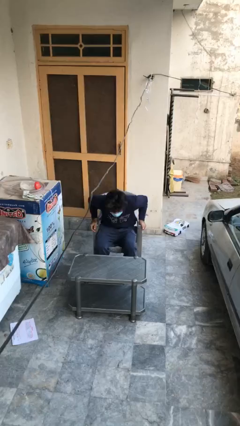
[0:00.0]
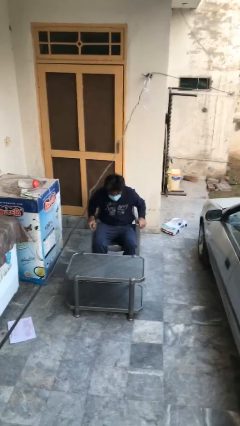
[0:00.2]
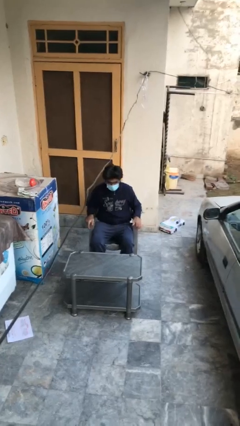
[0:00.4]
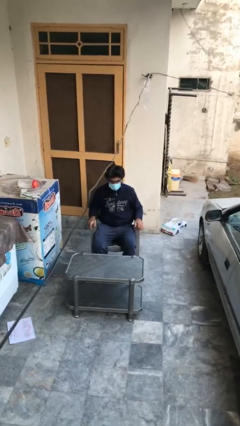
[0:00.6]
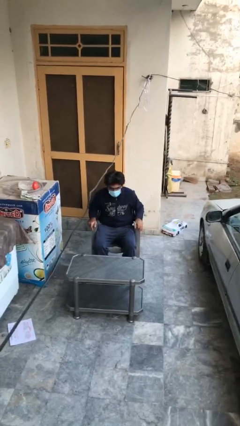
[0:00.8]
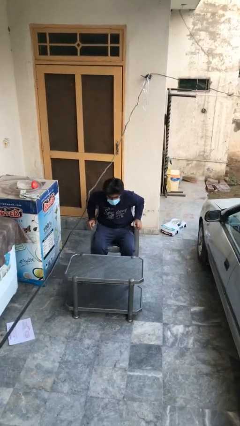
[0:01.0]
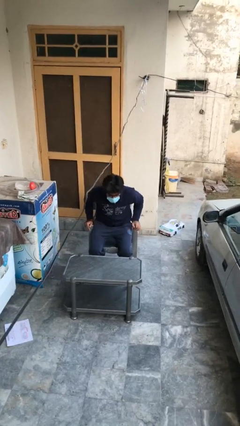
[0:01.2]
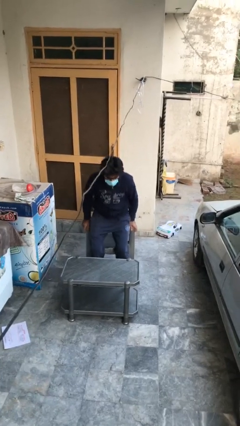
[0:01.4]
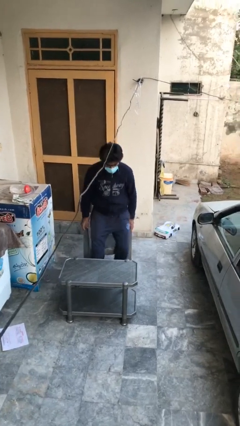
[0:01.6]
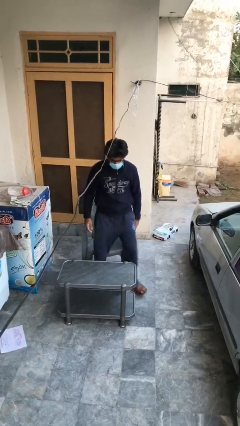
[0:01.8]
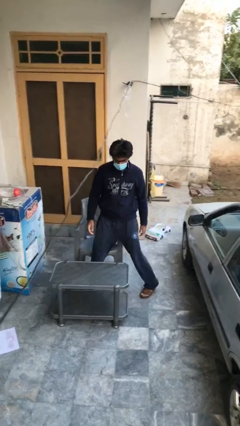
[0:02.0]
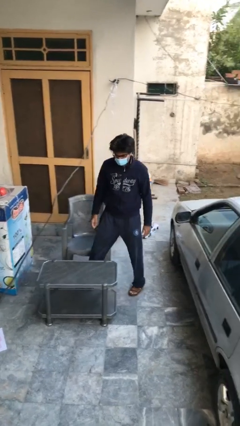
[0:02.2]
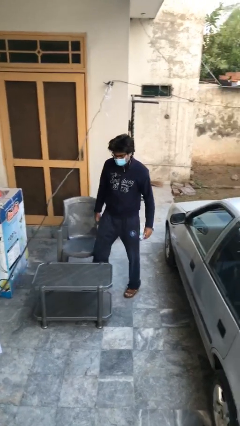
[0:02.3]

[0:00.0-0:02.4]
person stands up

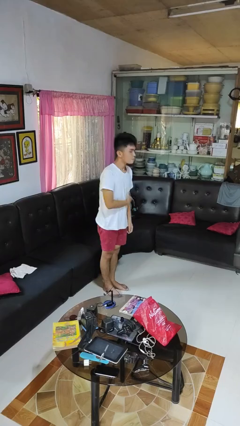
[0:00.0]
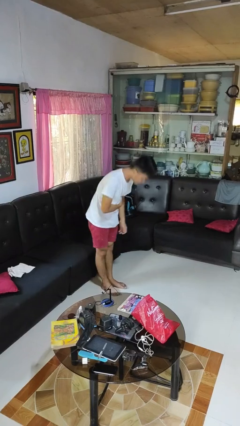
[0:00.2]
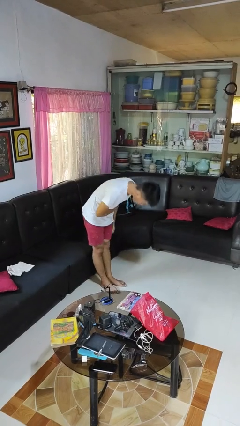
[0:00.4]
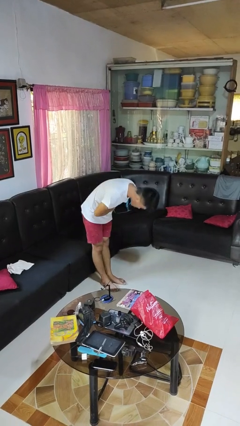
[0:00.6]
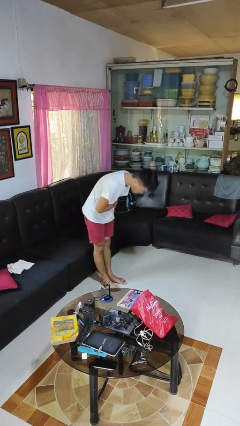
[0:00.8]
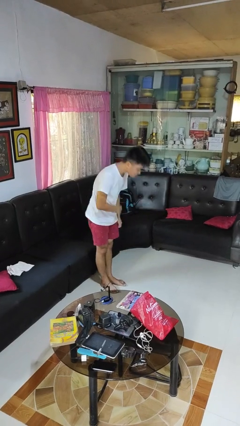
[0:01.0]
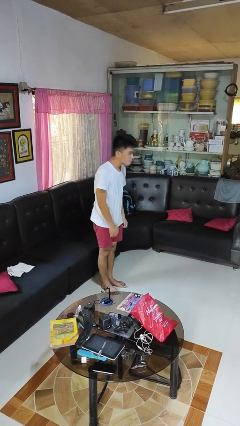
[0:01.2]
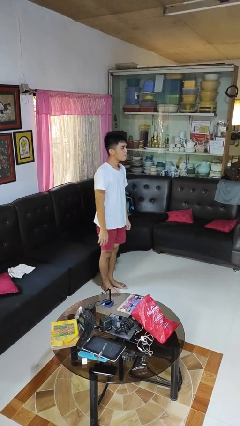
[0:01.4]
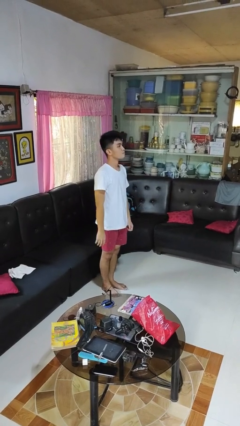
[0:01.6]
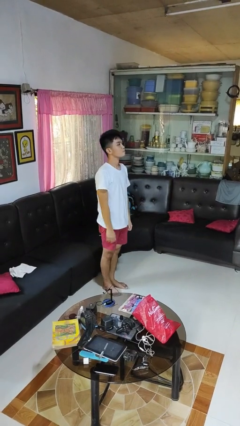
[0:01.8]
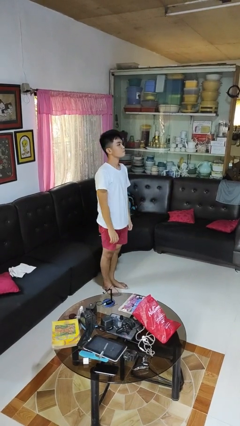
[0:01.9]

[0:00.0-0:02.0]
person bows

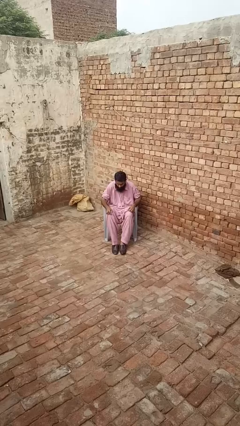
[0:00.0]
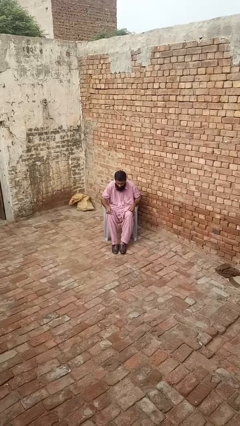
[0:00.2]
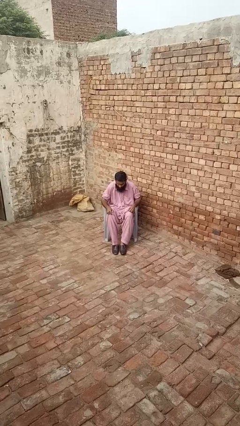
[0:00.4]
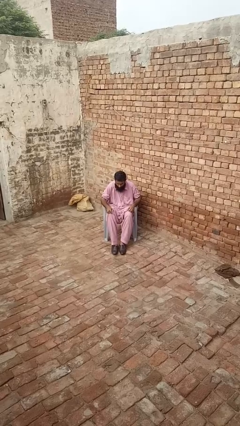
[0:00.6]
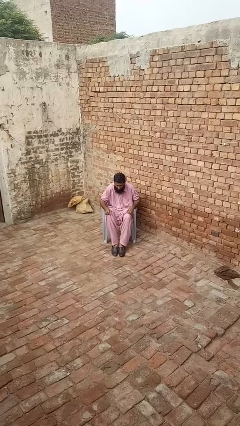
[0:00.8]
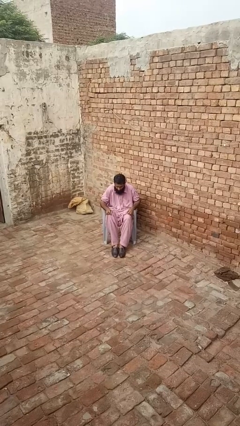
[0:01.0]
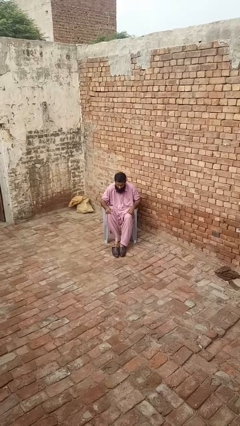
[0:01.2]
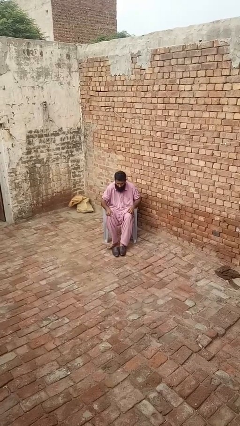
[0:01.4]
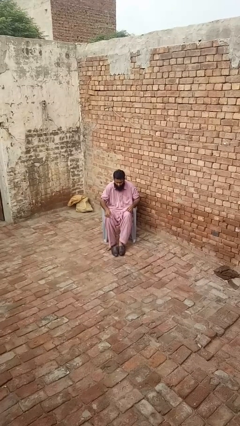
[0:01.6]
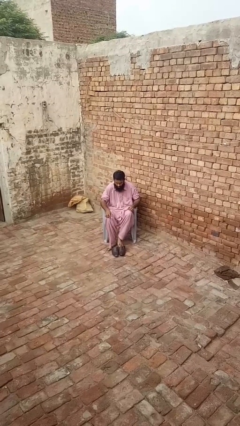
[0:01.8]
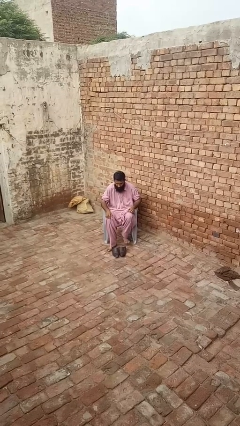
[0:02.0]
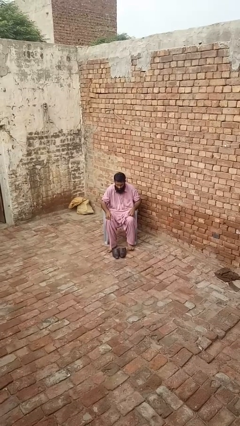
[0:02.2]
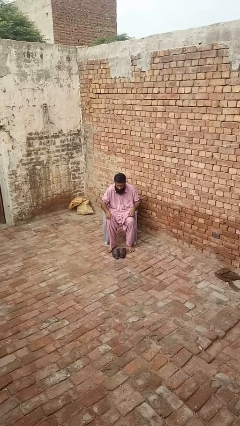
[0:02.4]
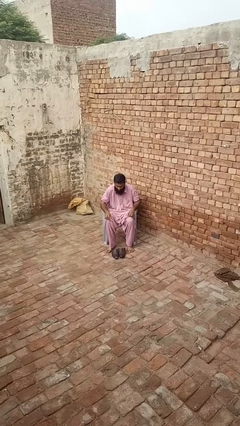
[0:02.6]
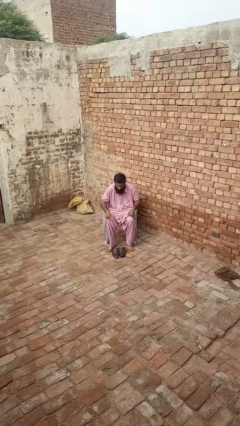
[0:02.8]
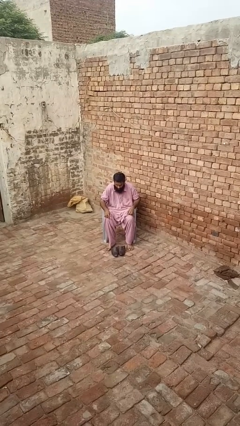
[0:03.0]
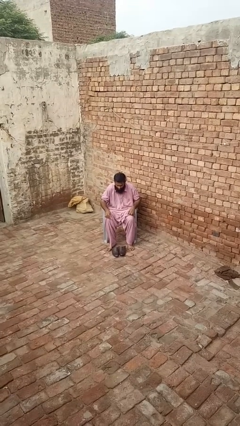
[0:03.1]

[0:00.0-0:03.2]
person takes off shoes

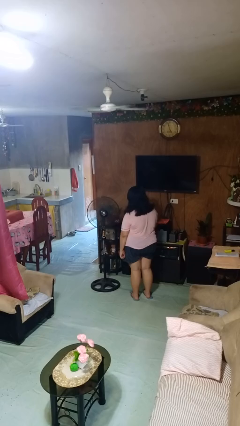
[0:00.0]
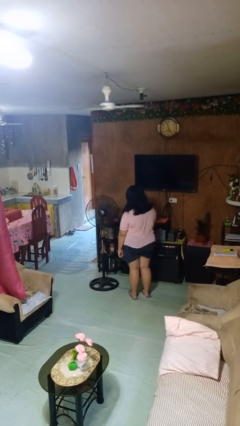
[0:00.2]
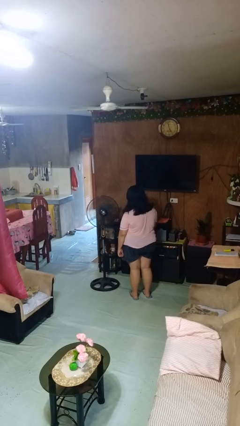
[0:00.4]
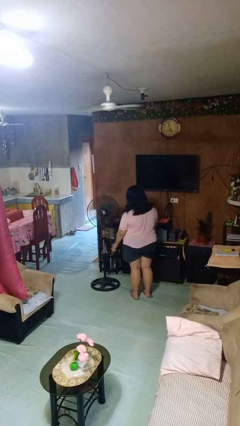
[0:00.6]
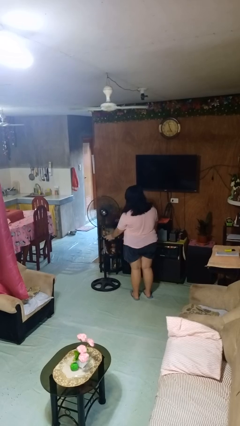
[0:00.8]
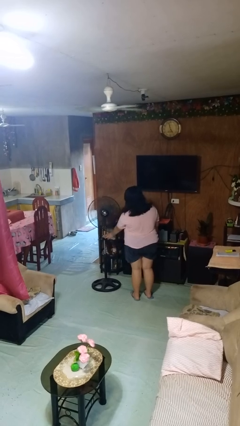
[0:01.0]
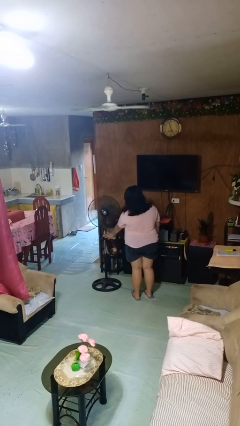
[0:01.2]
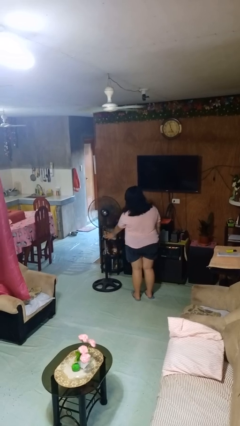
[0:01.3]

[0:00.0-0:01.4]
person turns off fan

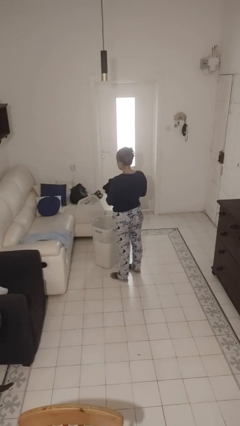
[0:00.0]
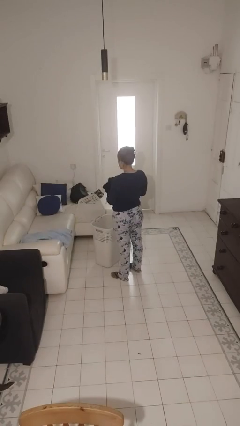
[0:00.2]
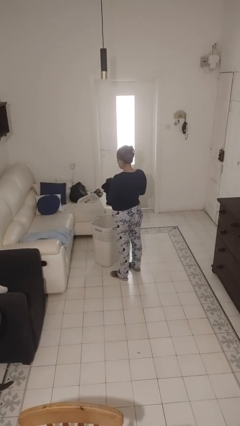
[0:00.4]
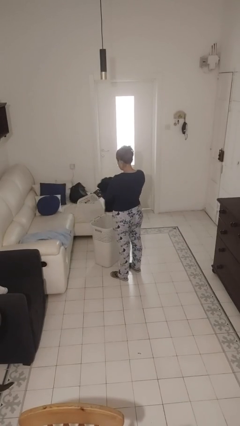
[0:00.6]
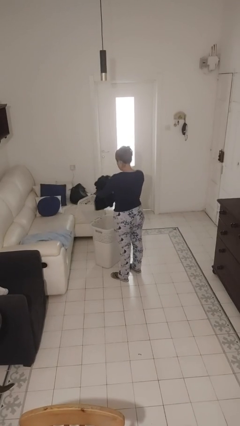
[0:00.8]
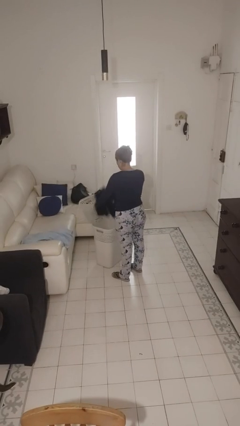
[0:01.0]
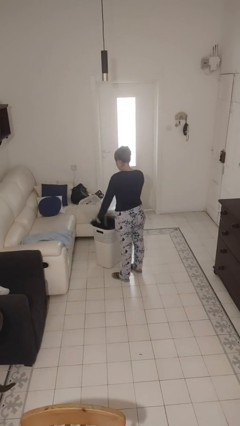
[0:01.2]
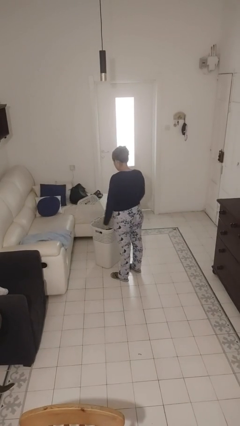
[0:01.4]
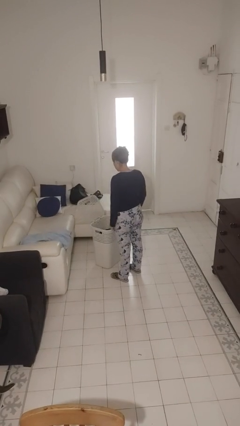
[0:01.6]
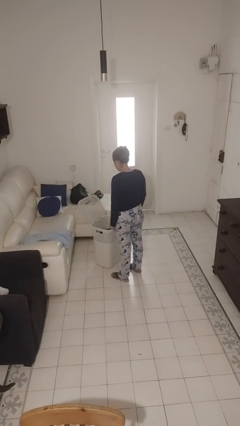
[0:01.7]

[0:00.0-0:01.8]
person puts object into basket

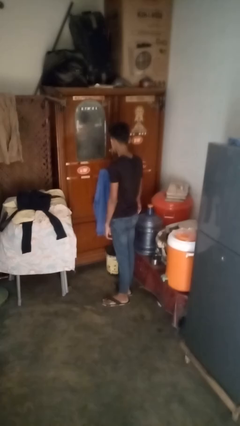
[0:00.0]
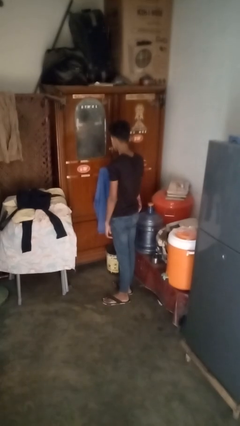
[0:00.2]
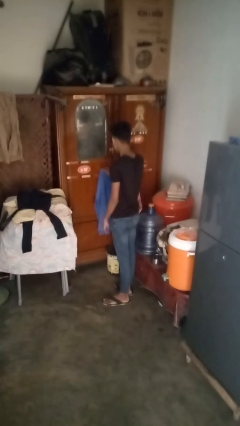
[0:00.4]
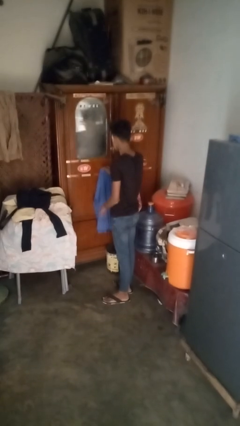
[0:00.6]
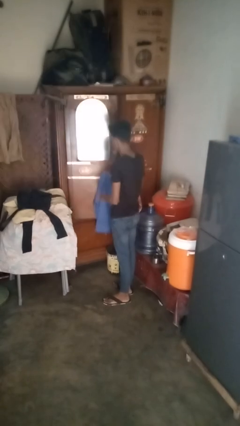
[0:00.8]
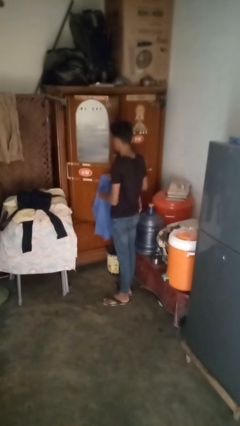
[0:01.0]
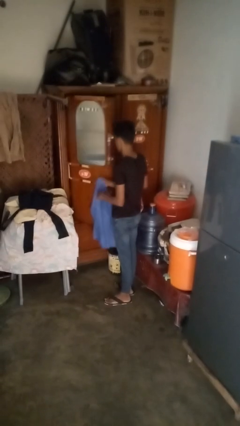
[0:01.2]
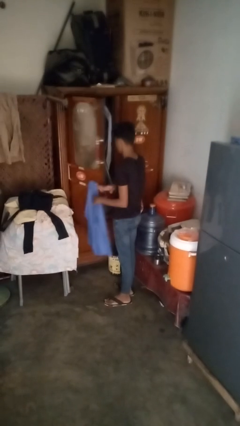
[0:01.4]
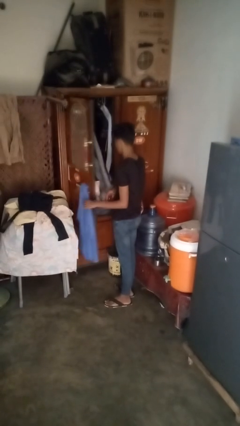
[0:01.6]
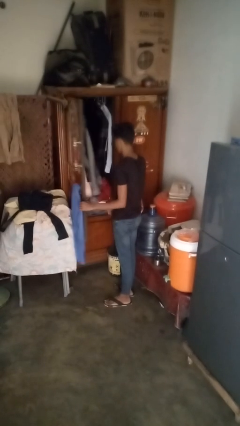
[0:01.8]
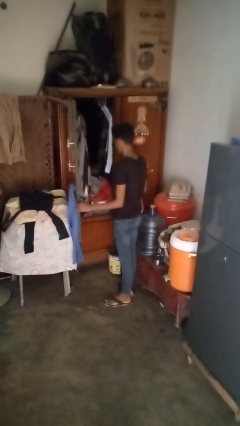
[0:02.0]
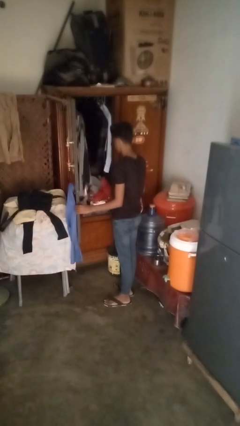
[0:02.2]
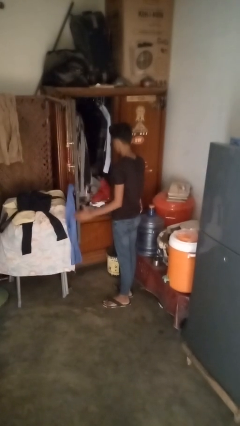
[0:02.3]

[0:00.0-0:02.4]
person opens dresser drawer

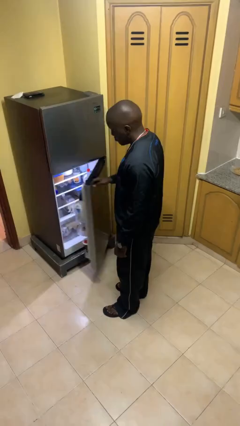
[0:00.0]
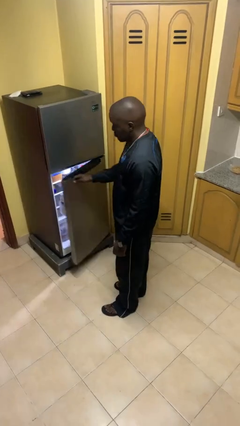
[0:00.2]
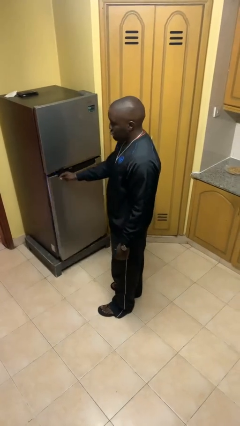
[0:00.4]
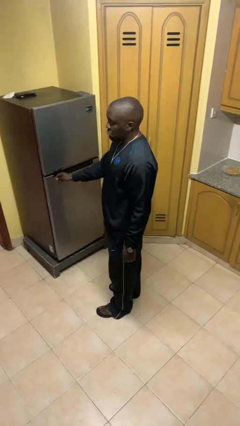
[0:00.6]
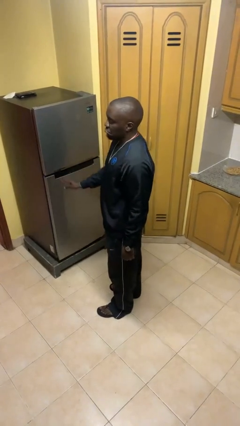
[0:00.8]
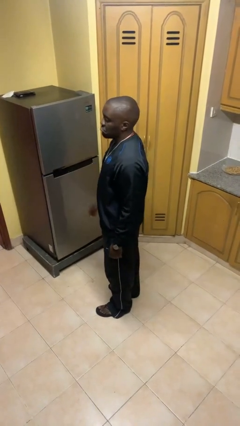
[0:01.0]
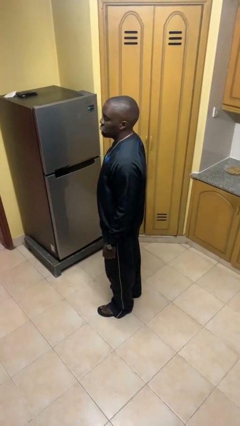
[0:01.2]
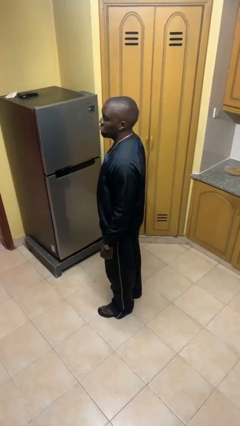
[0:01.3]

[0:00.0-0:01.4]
person closes refrigerator

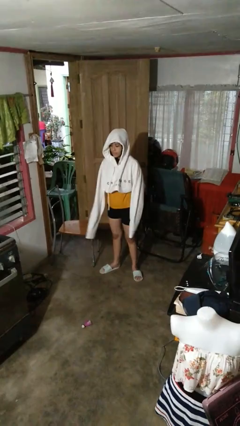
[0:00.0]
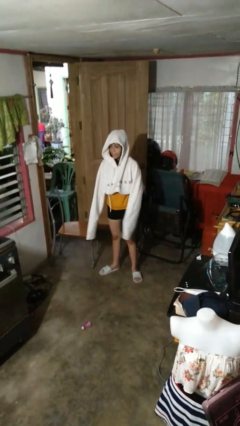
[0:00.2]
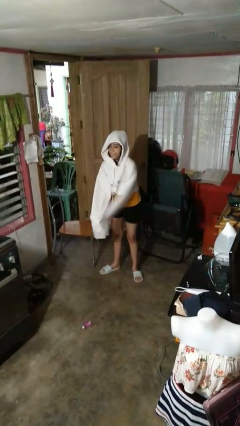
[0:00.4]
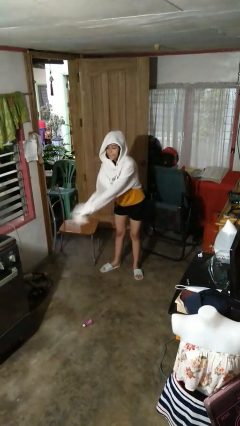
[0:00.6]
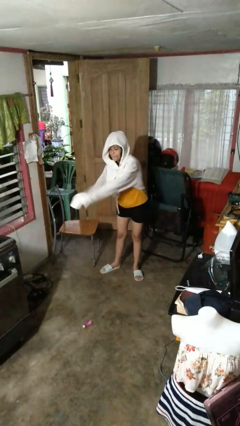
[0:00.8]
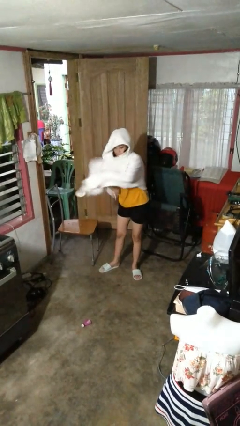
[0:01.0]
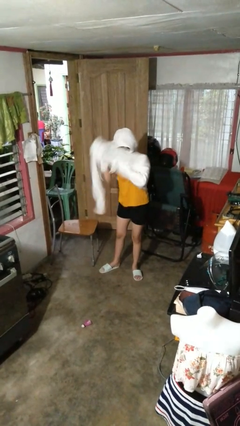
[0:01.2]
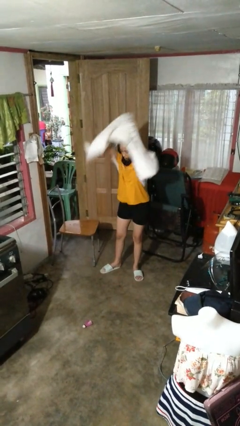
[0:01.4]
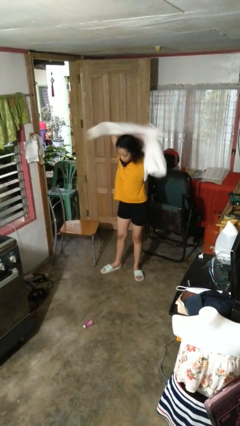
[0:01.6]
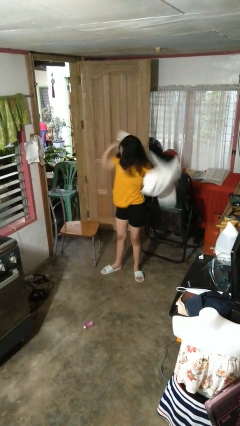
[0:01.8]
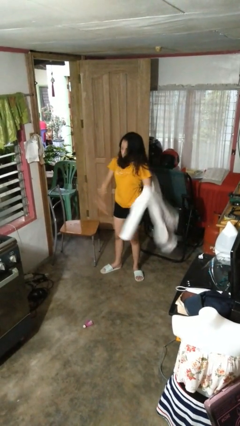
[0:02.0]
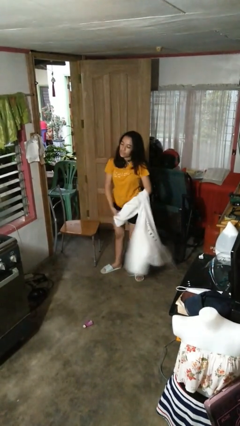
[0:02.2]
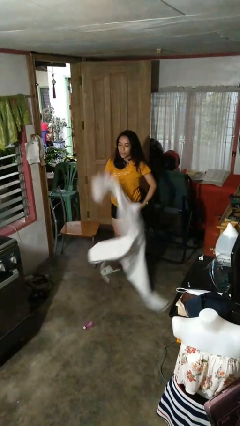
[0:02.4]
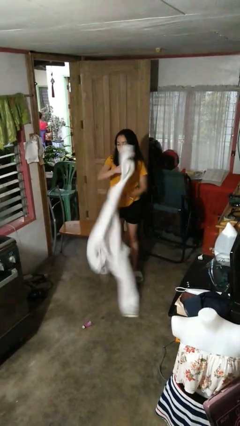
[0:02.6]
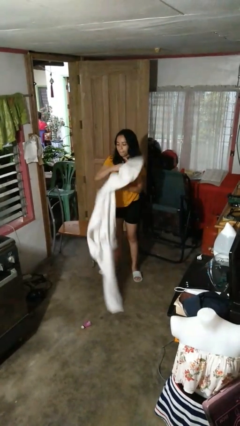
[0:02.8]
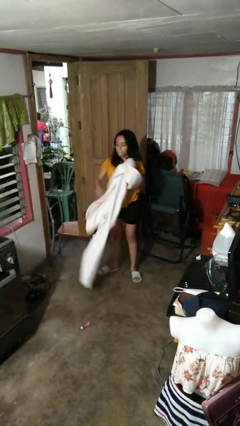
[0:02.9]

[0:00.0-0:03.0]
person takes off hoodie
